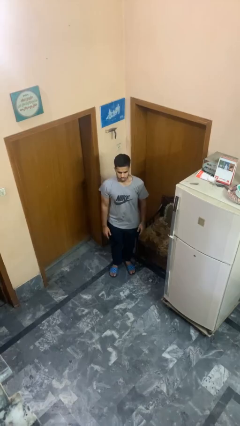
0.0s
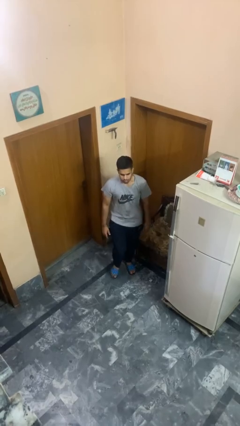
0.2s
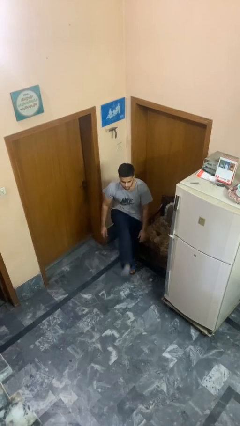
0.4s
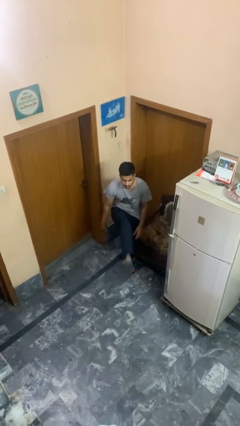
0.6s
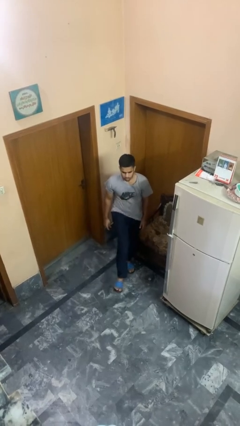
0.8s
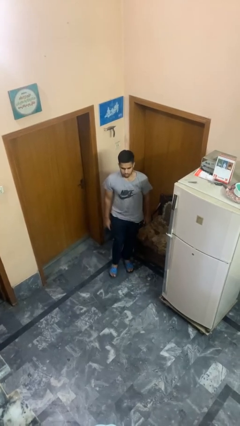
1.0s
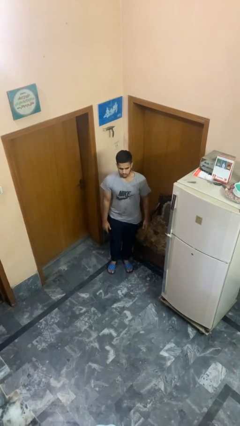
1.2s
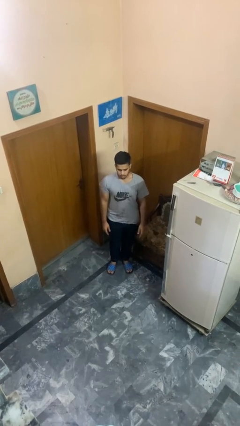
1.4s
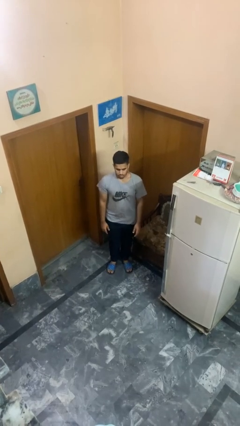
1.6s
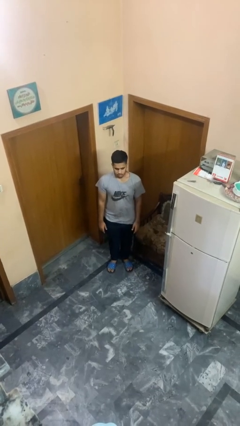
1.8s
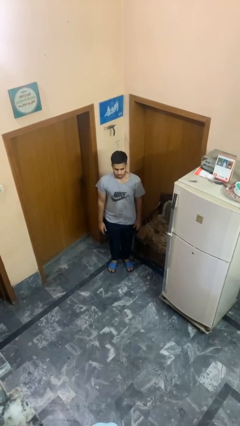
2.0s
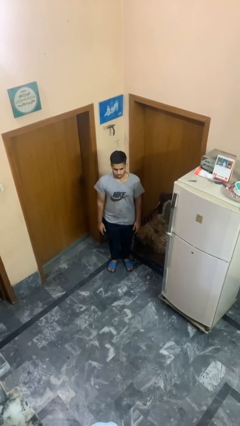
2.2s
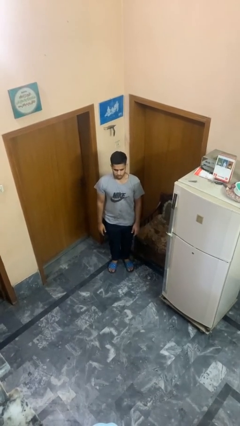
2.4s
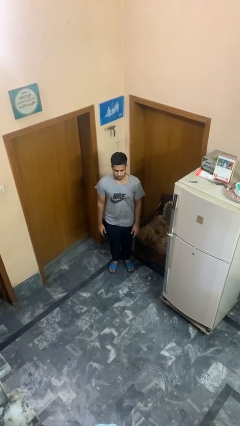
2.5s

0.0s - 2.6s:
person karate kicks

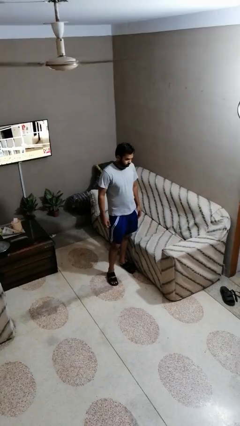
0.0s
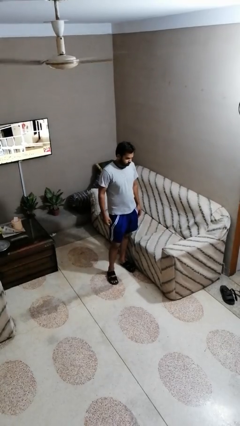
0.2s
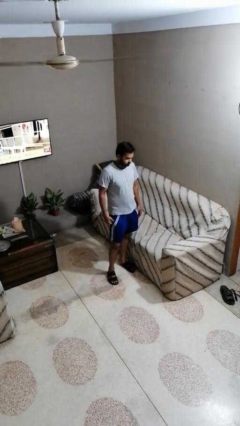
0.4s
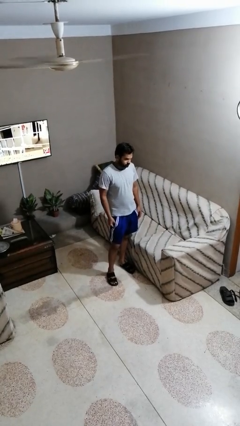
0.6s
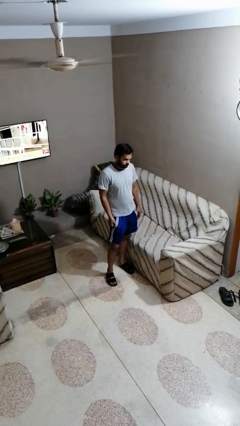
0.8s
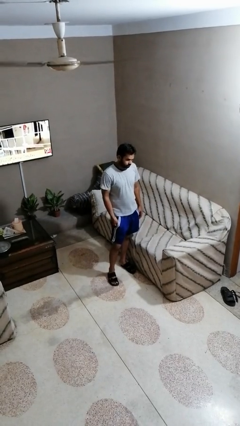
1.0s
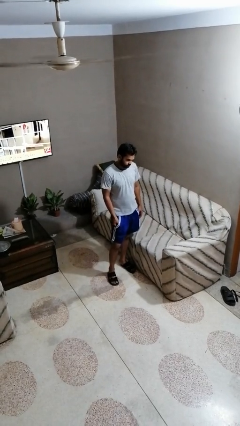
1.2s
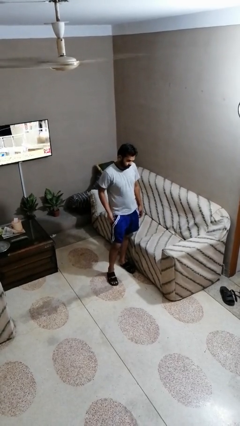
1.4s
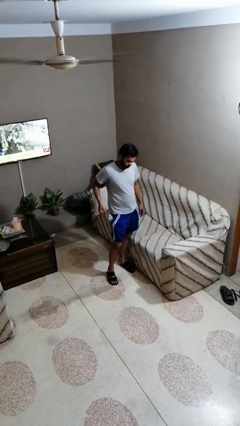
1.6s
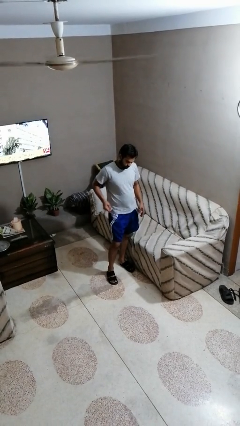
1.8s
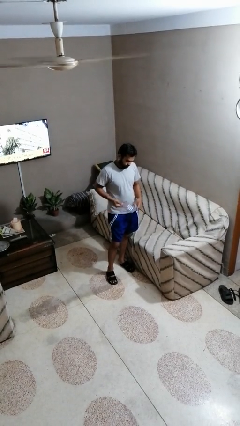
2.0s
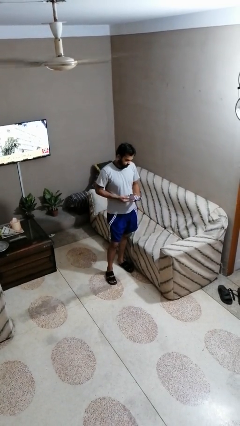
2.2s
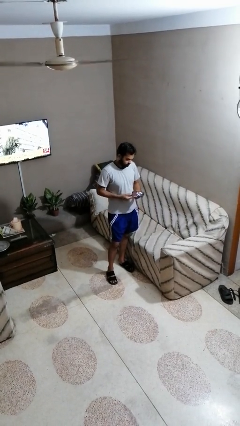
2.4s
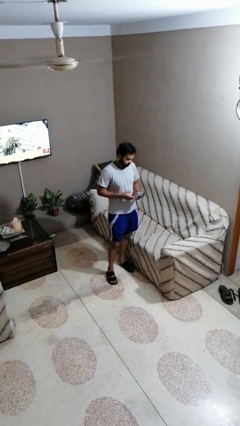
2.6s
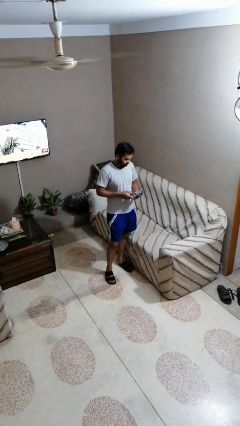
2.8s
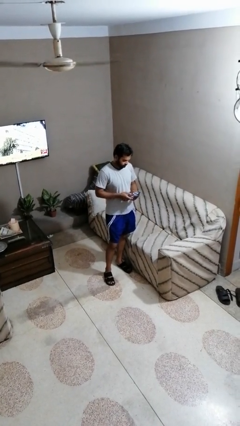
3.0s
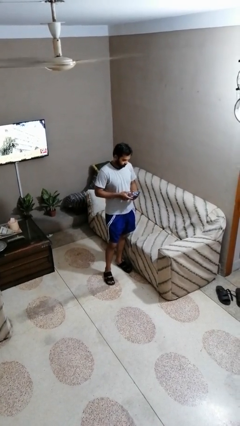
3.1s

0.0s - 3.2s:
person takes phone from pocket

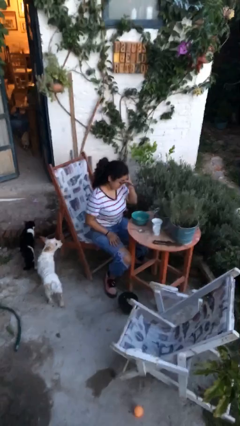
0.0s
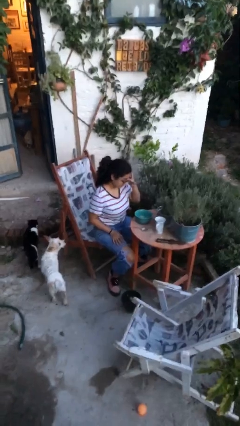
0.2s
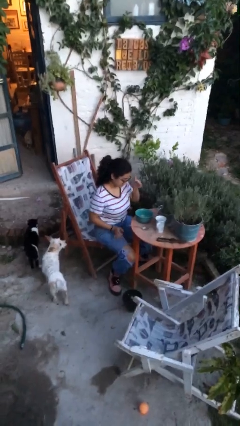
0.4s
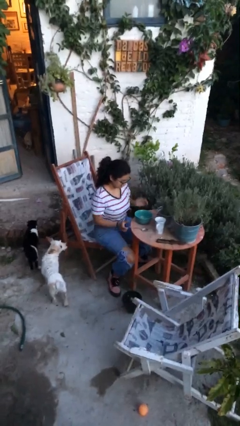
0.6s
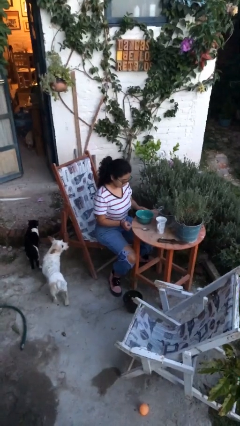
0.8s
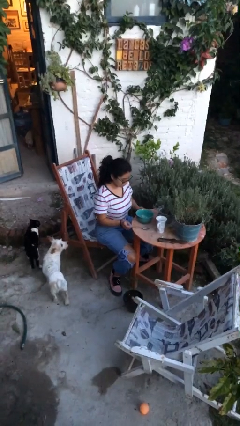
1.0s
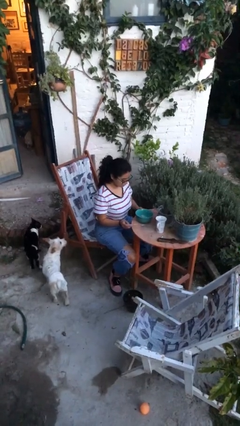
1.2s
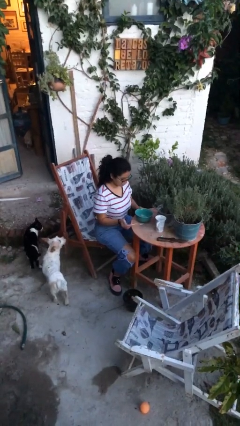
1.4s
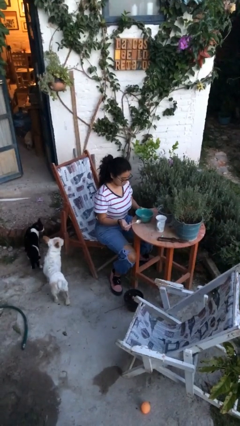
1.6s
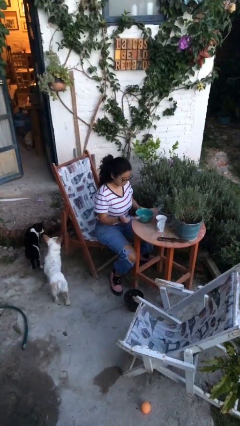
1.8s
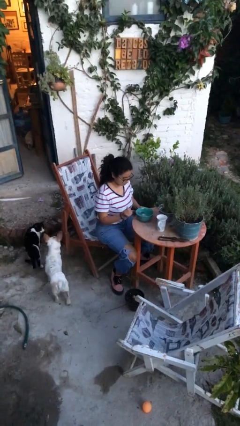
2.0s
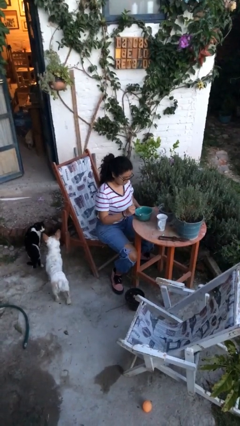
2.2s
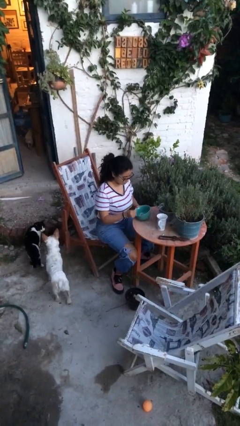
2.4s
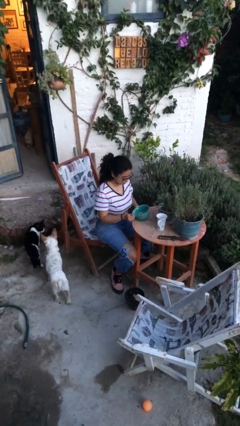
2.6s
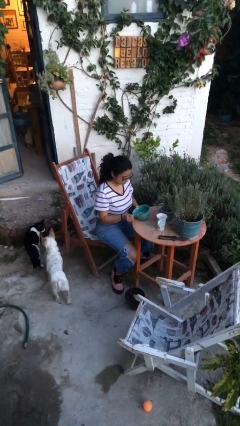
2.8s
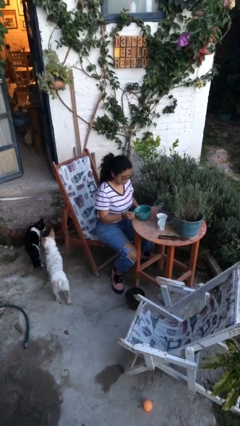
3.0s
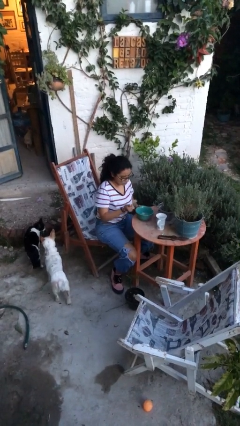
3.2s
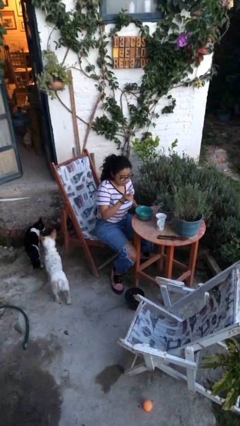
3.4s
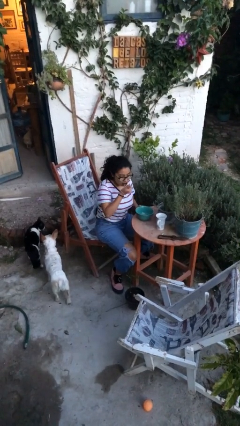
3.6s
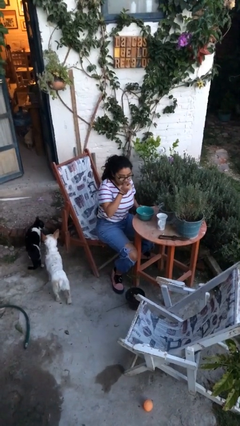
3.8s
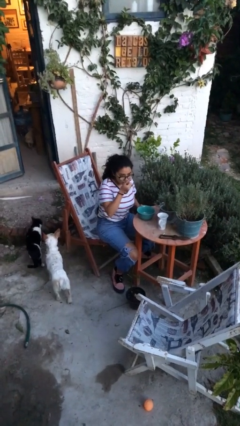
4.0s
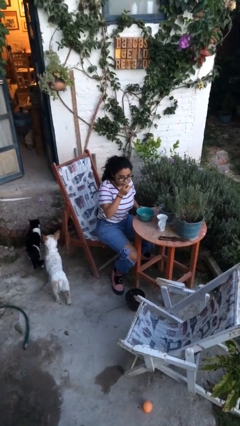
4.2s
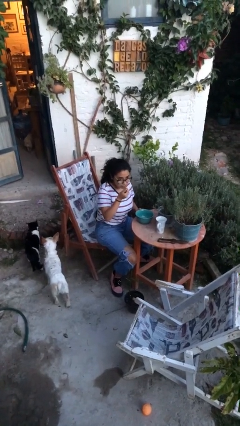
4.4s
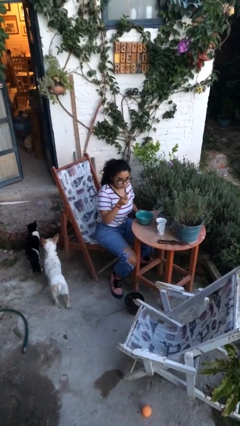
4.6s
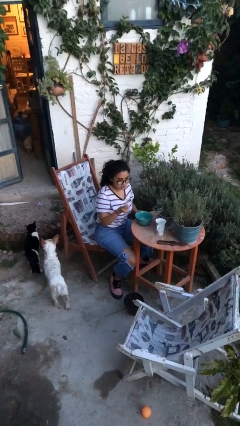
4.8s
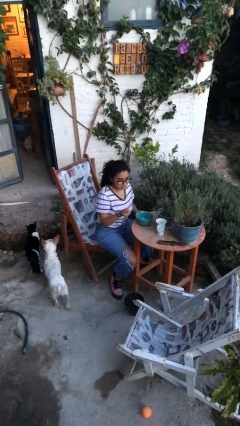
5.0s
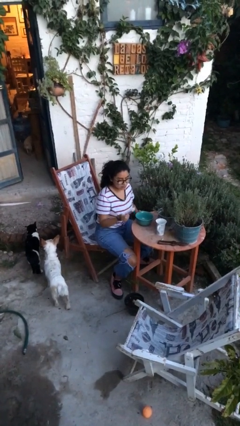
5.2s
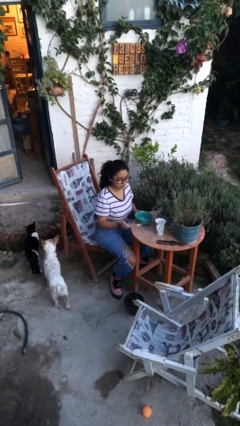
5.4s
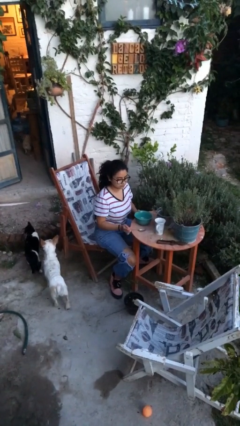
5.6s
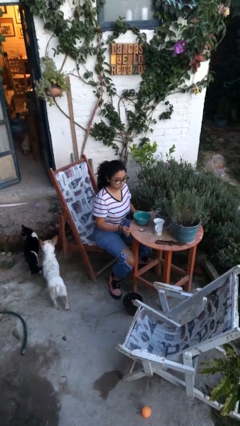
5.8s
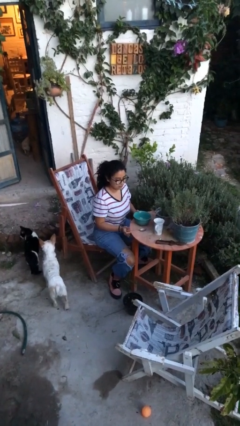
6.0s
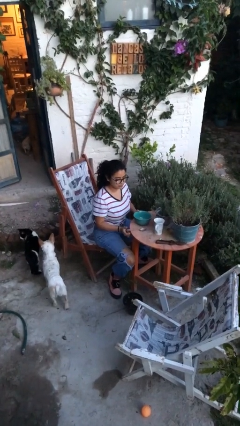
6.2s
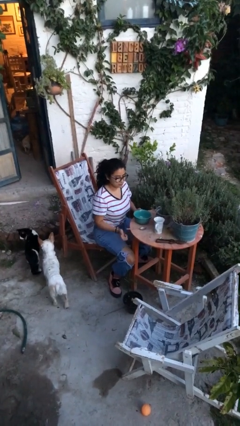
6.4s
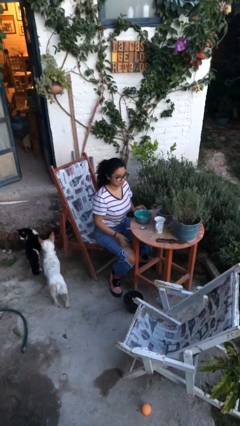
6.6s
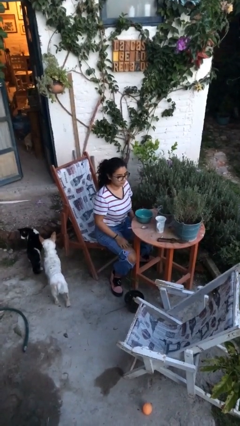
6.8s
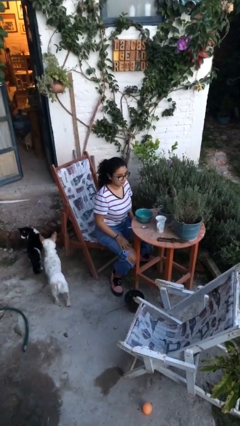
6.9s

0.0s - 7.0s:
person eats with utensil

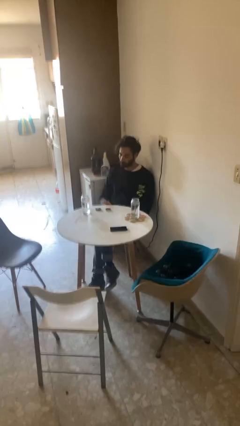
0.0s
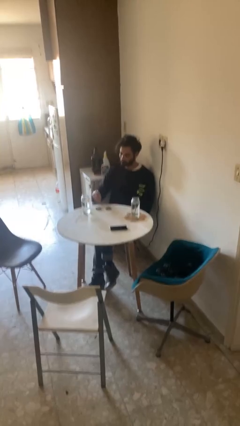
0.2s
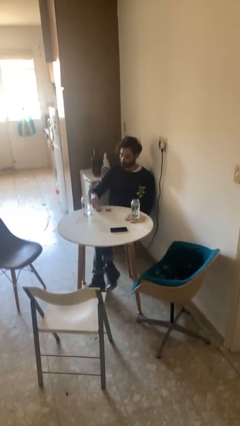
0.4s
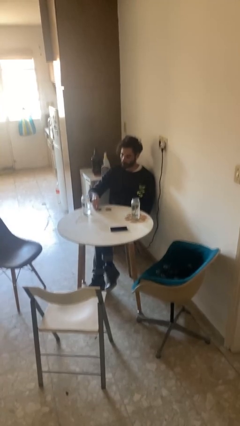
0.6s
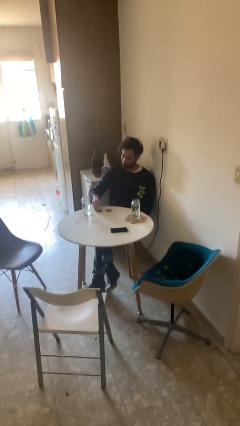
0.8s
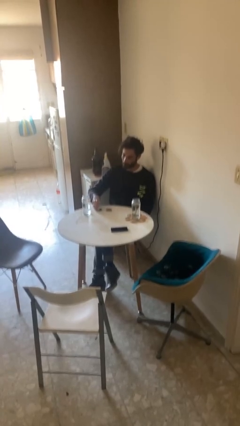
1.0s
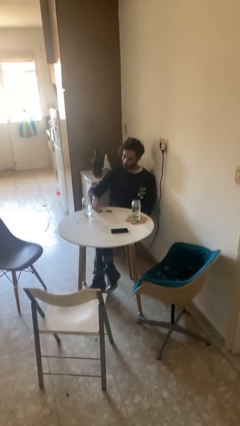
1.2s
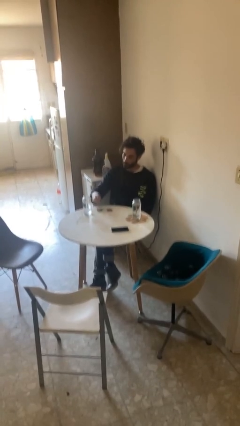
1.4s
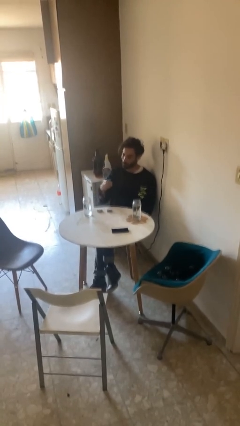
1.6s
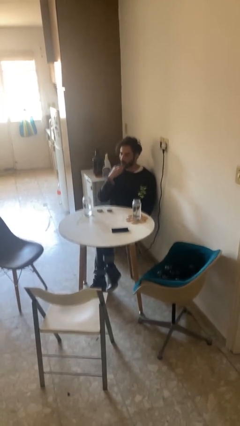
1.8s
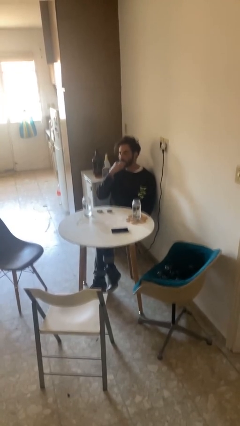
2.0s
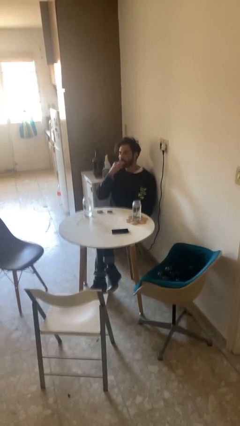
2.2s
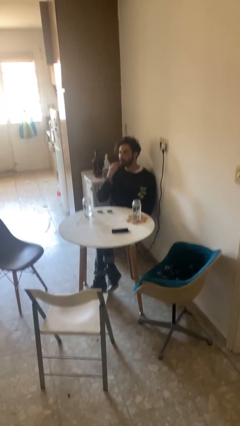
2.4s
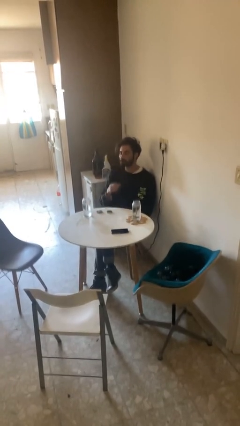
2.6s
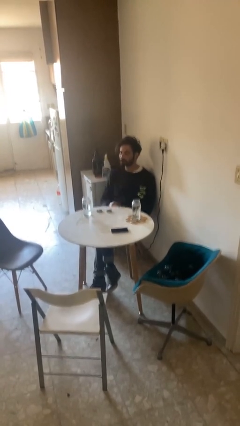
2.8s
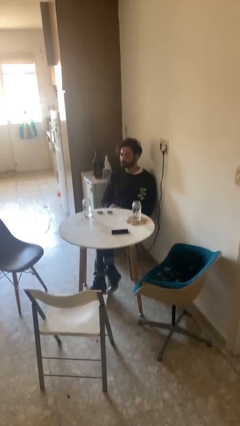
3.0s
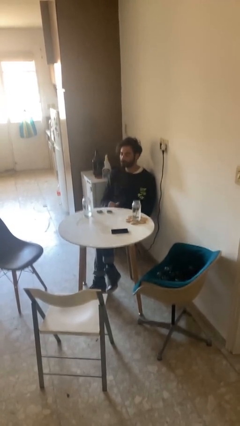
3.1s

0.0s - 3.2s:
person takes medicine pills

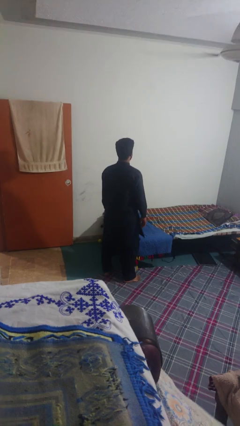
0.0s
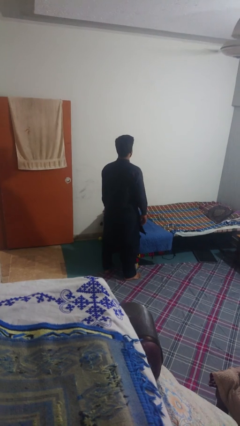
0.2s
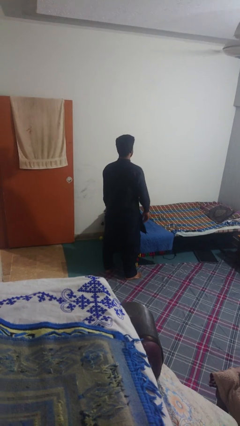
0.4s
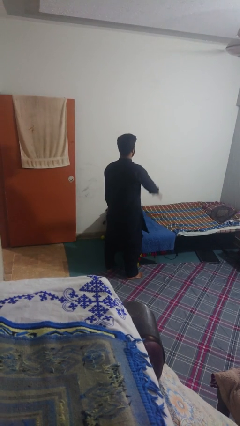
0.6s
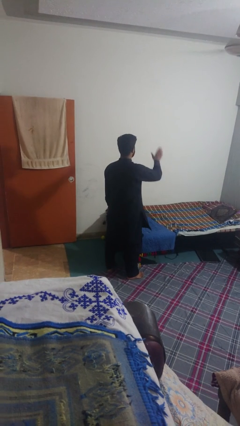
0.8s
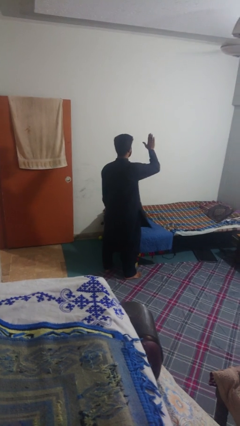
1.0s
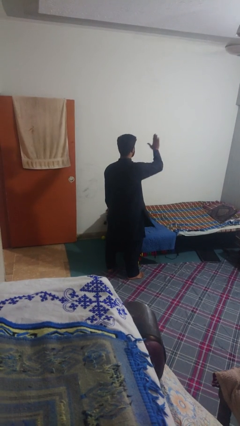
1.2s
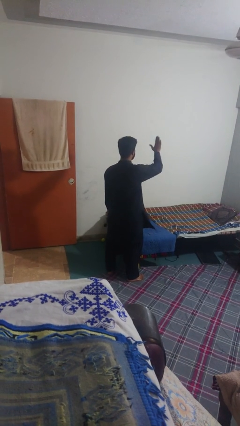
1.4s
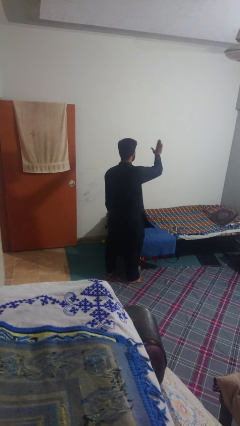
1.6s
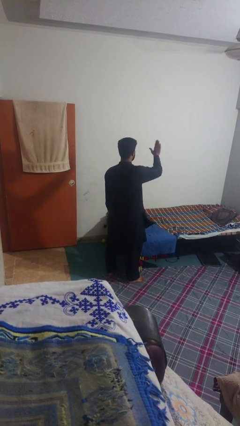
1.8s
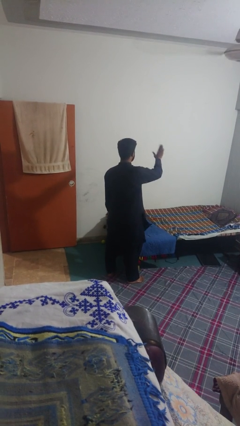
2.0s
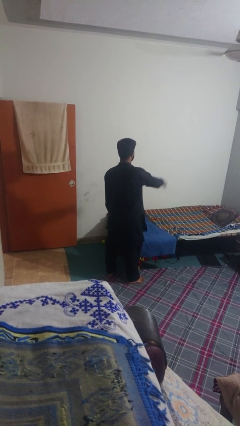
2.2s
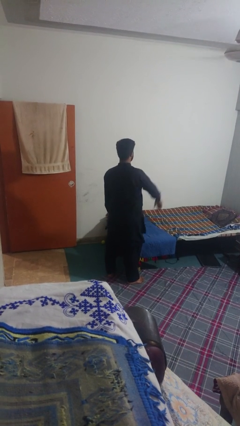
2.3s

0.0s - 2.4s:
person gestures stop
